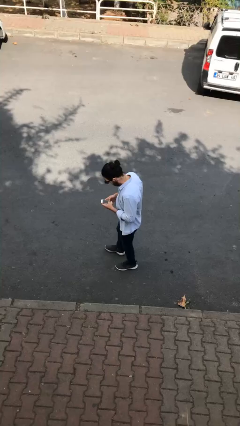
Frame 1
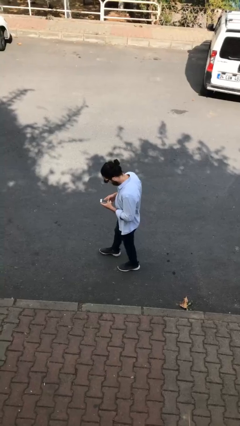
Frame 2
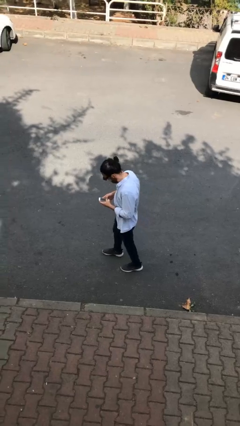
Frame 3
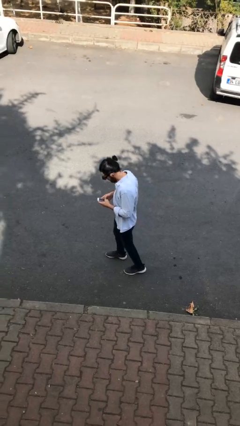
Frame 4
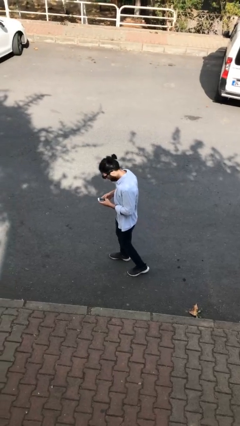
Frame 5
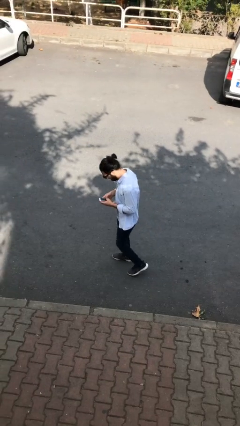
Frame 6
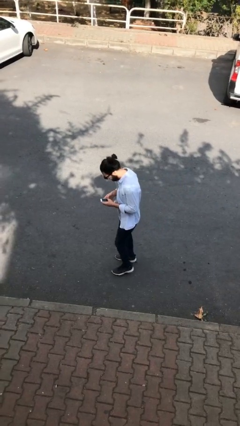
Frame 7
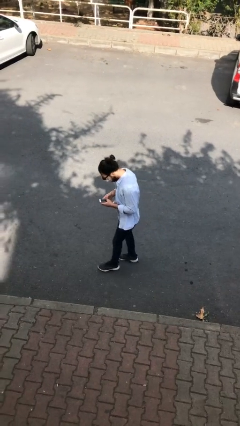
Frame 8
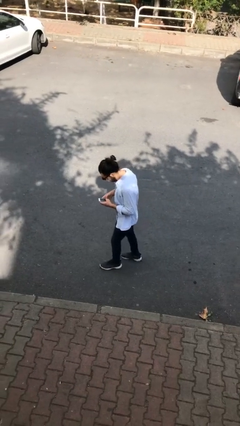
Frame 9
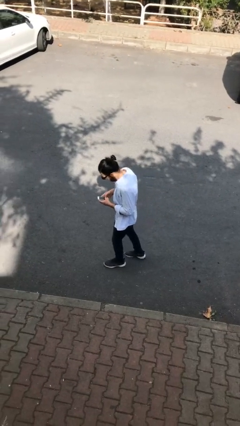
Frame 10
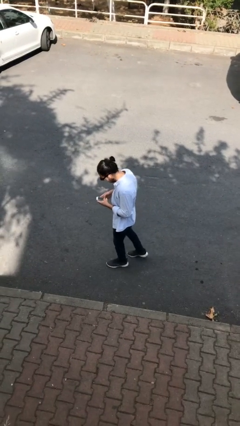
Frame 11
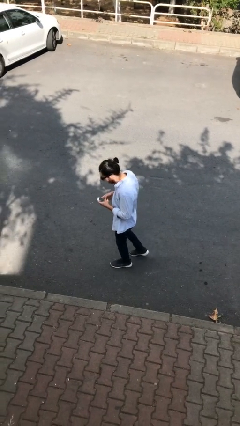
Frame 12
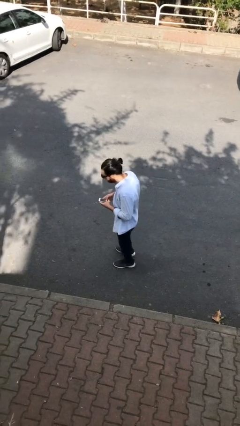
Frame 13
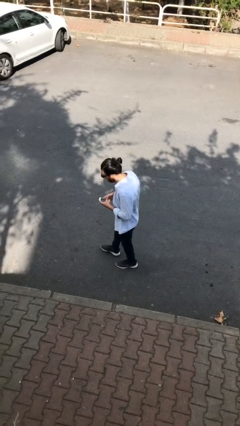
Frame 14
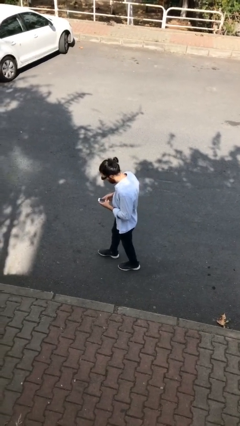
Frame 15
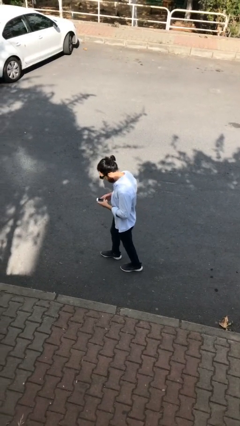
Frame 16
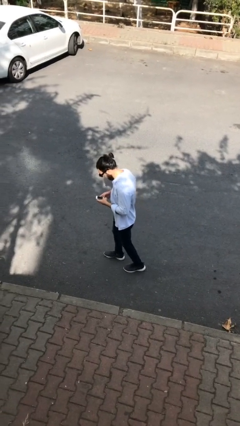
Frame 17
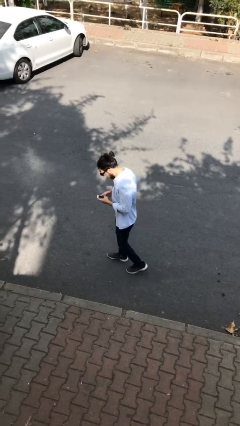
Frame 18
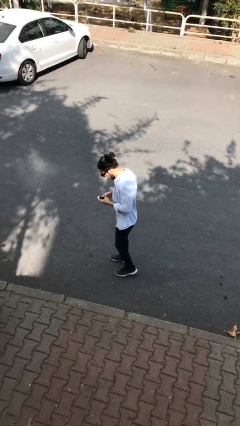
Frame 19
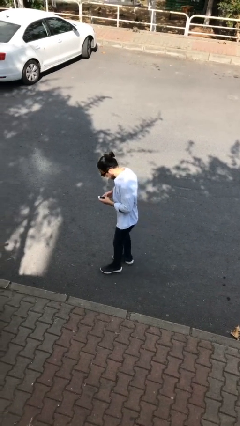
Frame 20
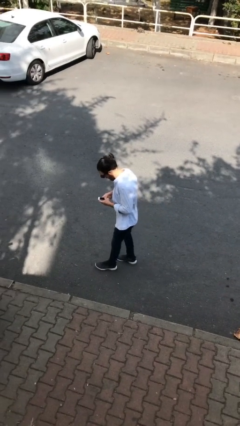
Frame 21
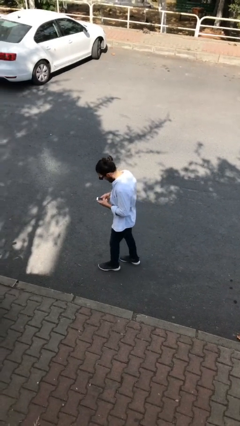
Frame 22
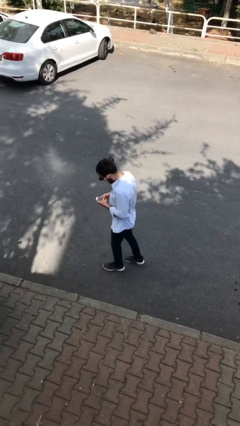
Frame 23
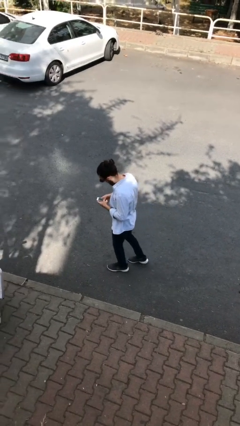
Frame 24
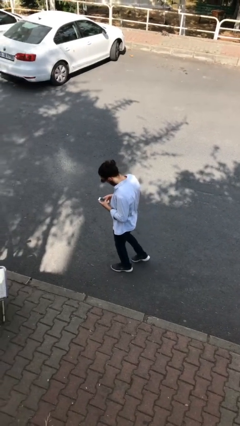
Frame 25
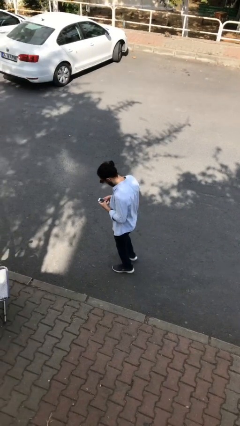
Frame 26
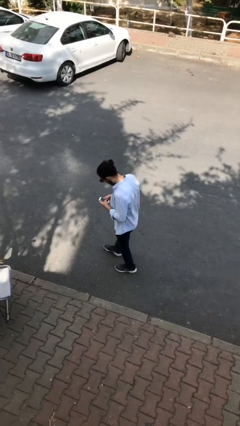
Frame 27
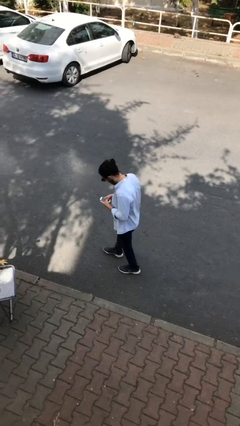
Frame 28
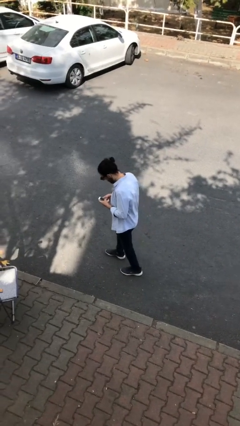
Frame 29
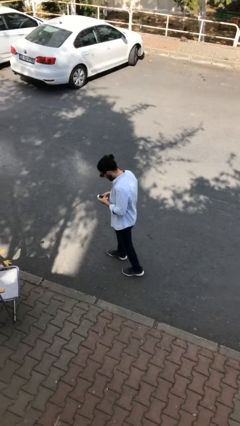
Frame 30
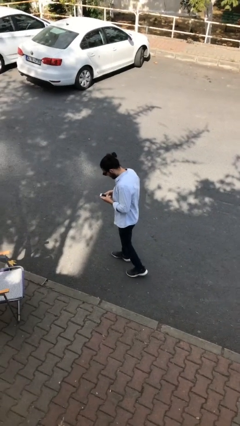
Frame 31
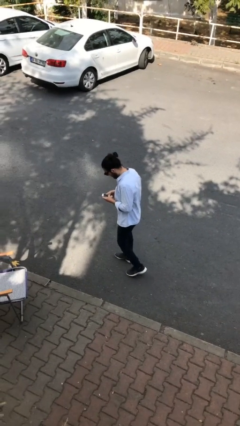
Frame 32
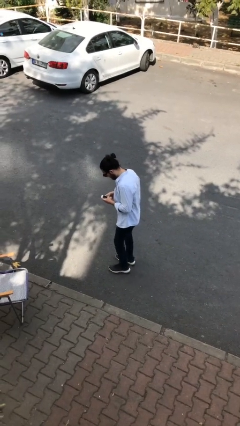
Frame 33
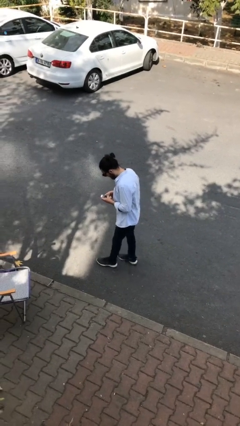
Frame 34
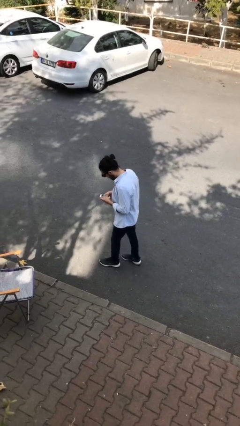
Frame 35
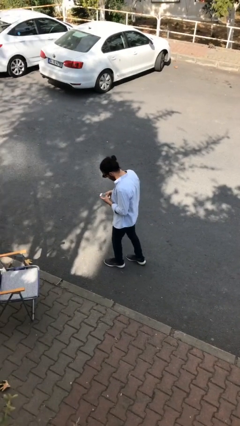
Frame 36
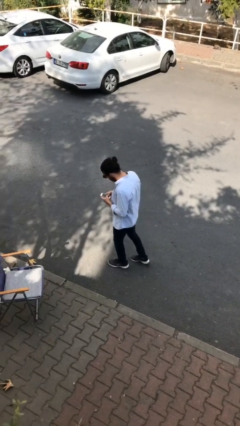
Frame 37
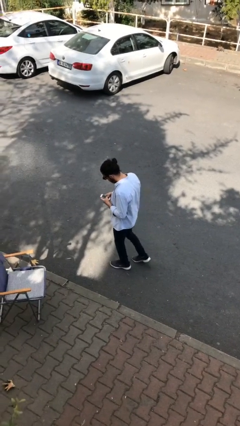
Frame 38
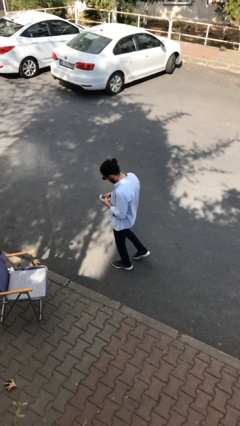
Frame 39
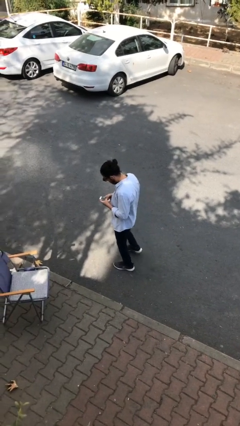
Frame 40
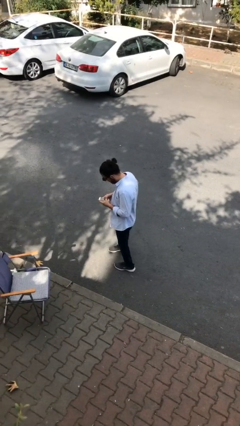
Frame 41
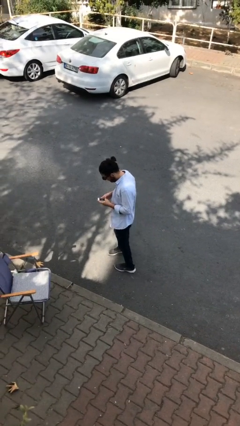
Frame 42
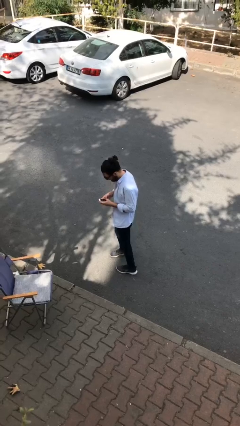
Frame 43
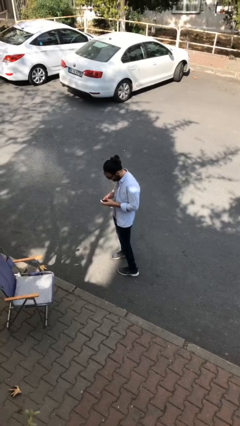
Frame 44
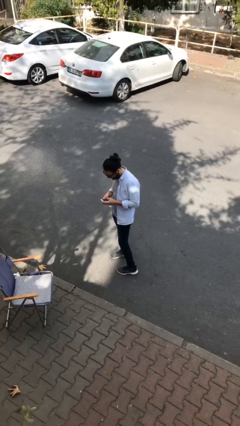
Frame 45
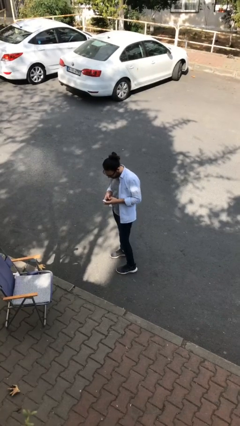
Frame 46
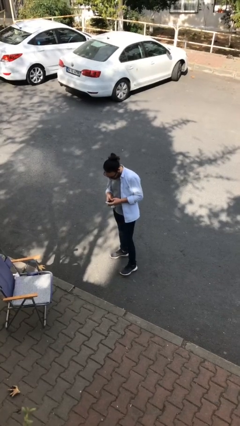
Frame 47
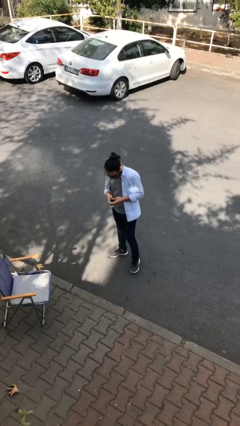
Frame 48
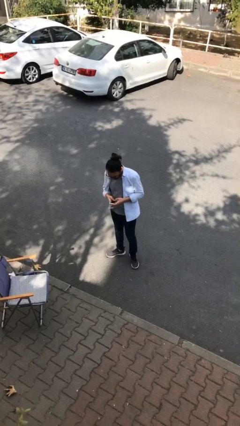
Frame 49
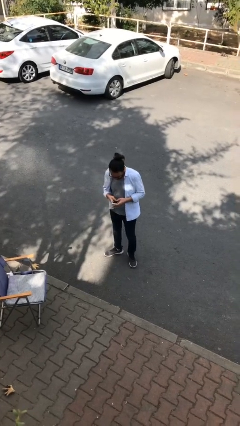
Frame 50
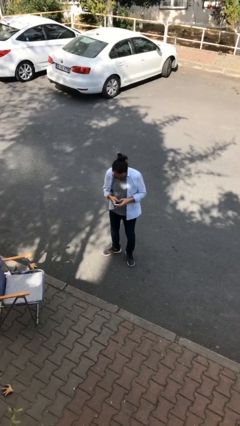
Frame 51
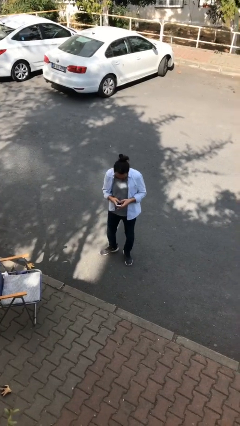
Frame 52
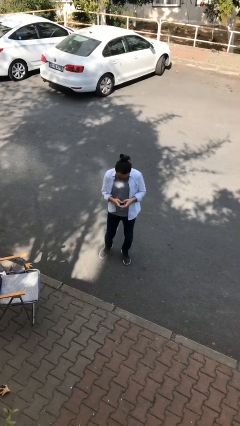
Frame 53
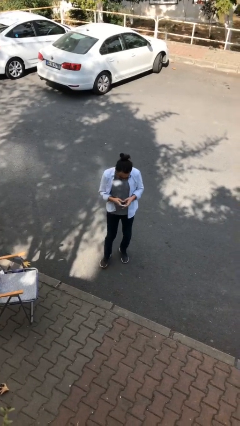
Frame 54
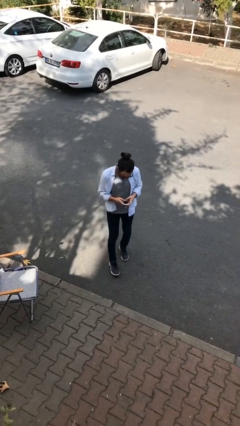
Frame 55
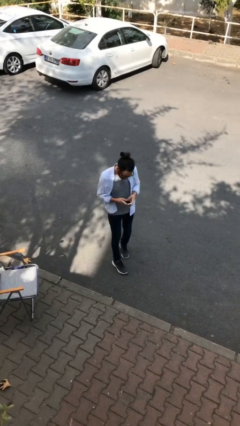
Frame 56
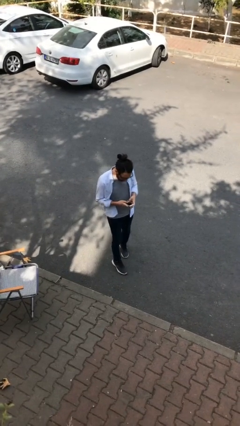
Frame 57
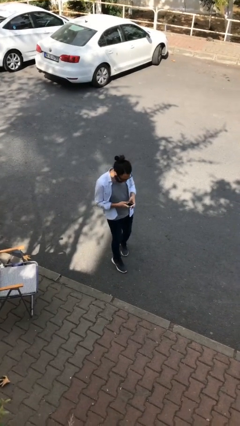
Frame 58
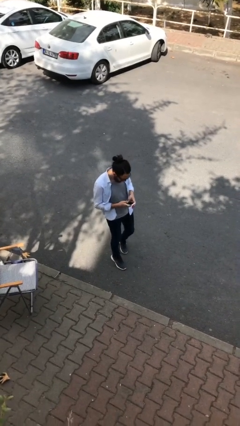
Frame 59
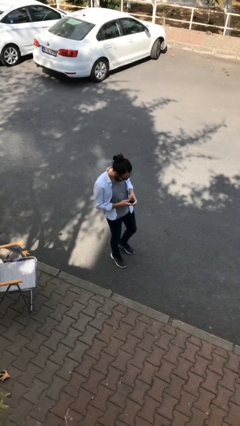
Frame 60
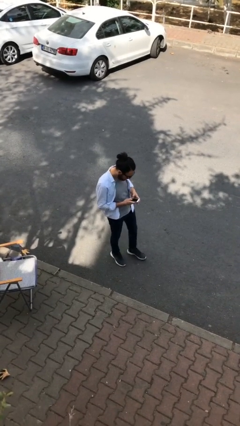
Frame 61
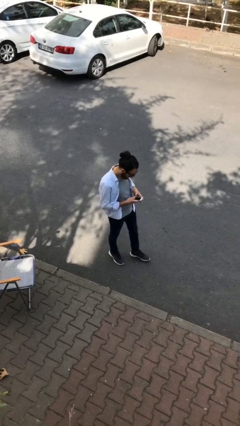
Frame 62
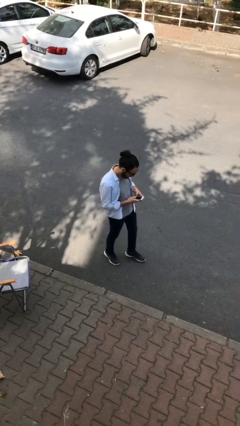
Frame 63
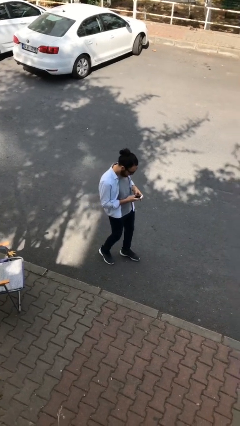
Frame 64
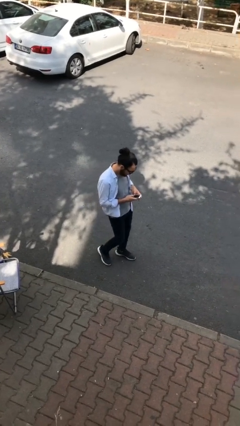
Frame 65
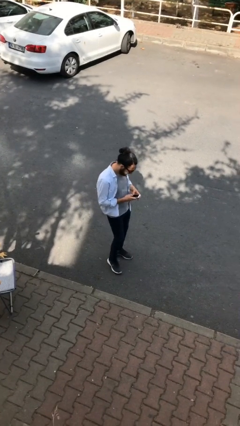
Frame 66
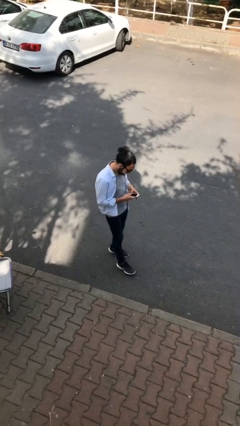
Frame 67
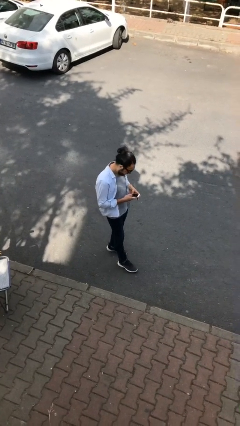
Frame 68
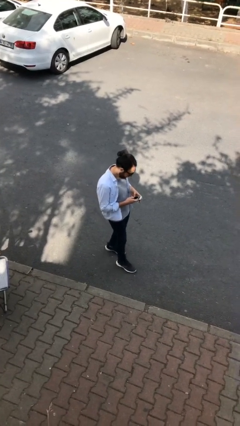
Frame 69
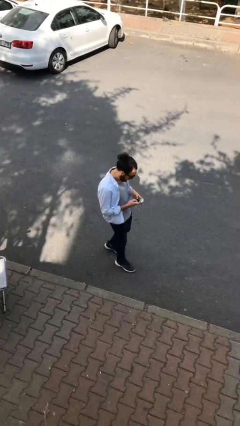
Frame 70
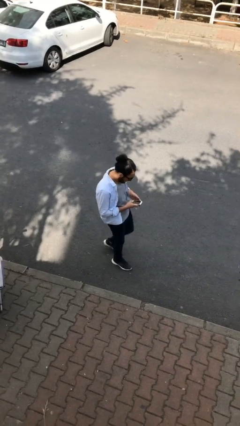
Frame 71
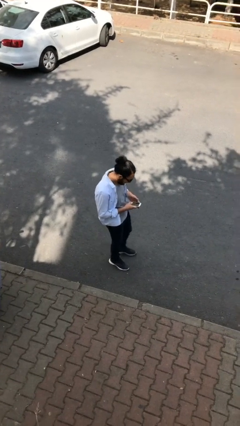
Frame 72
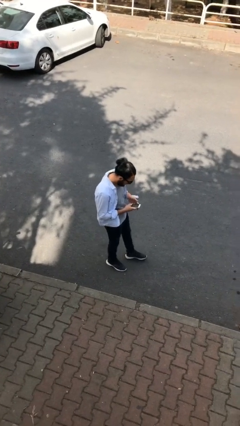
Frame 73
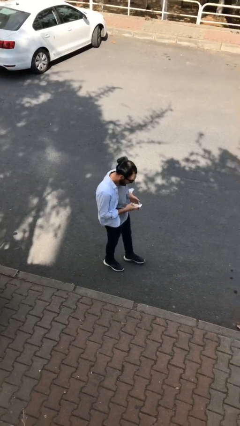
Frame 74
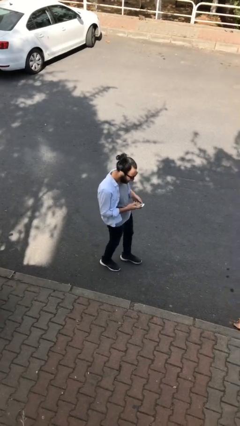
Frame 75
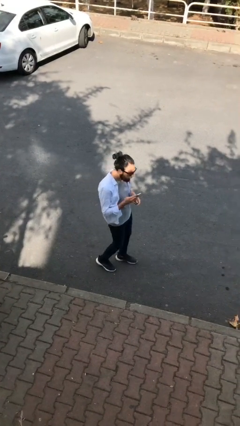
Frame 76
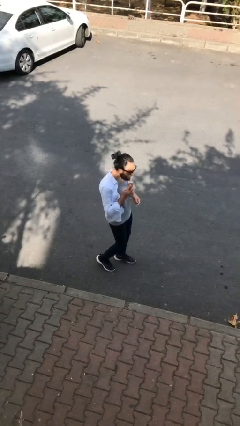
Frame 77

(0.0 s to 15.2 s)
person texts on phone

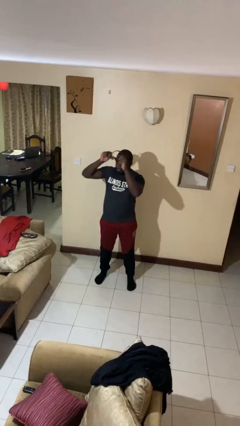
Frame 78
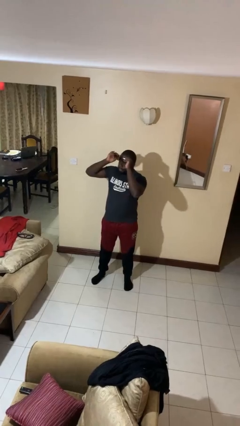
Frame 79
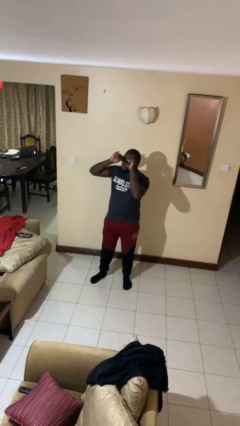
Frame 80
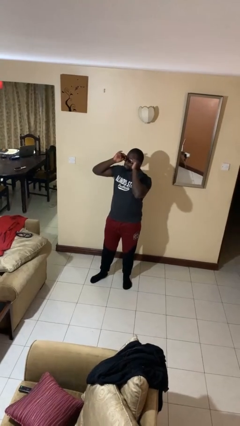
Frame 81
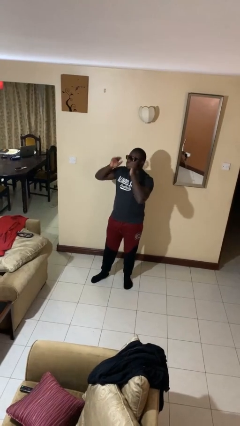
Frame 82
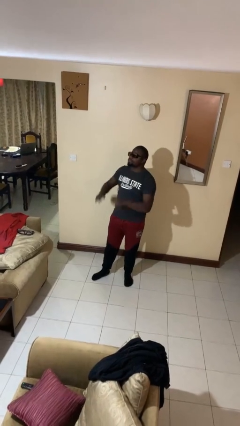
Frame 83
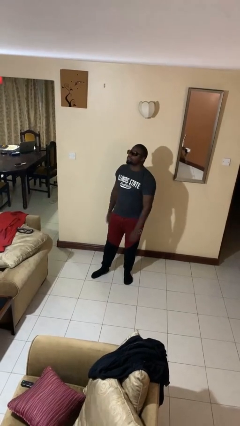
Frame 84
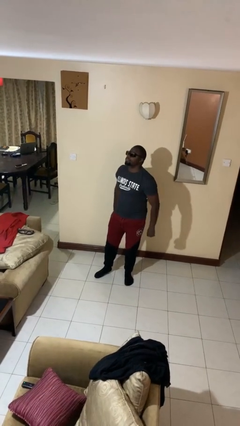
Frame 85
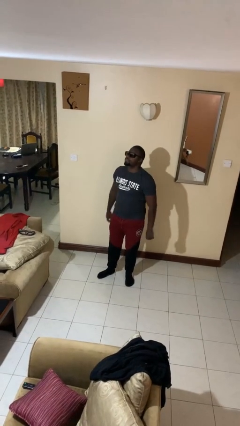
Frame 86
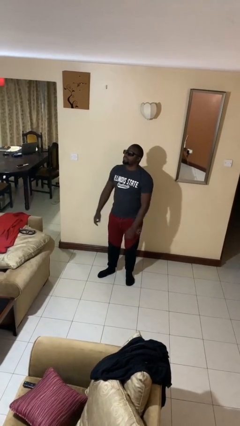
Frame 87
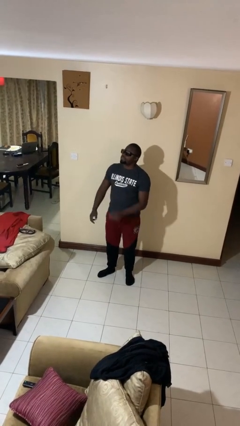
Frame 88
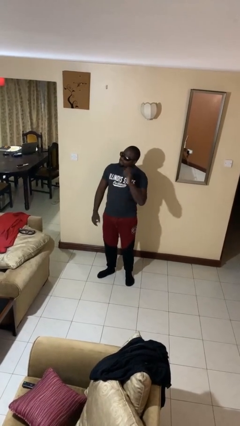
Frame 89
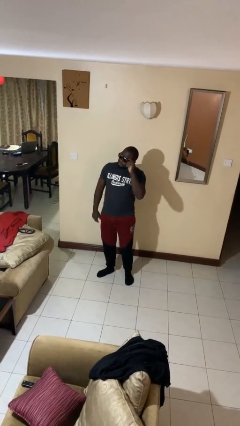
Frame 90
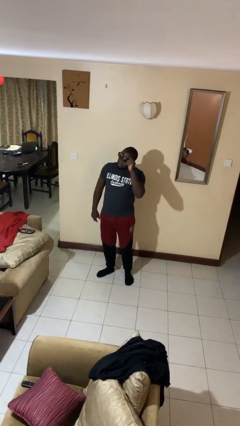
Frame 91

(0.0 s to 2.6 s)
person puts on sunglasses

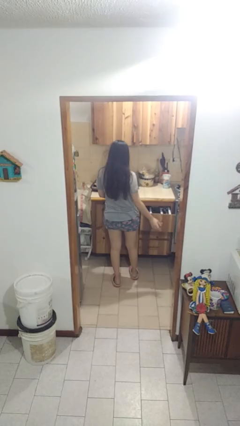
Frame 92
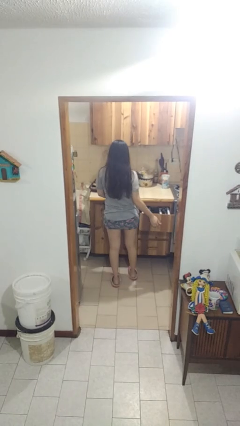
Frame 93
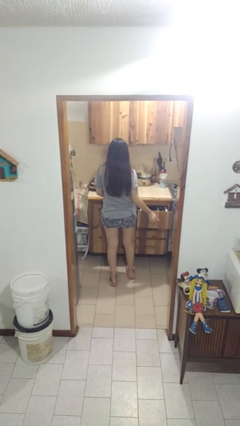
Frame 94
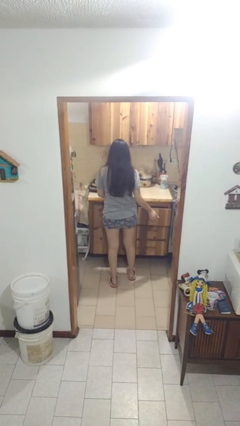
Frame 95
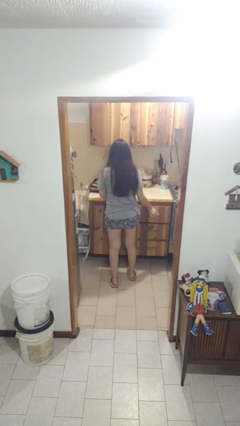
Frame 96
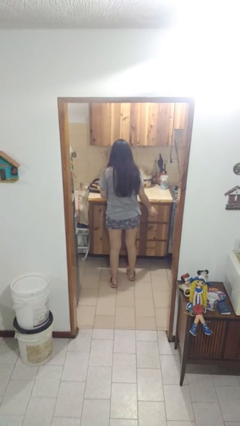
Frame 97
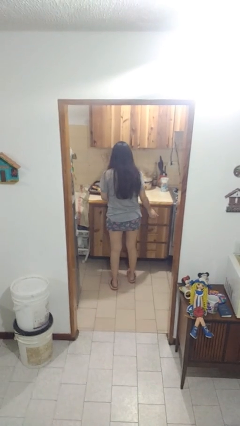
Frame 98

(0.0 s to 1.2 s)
person closes kitchen drawer
